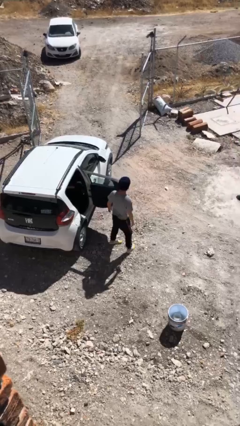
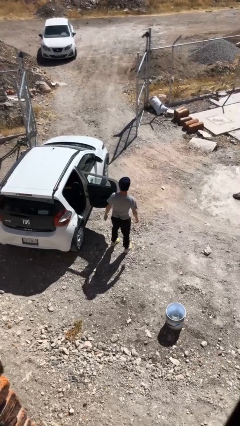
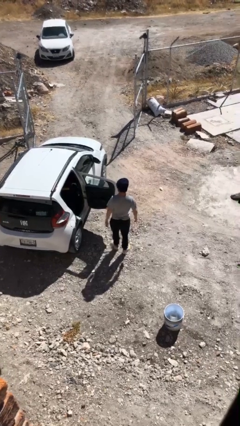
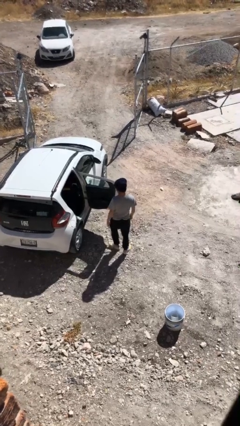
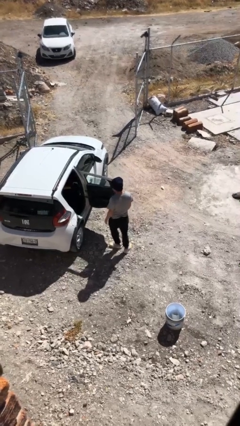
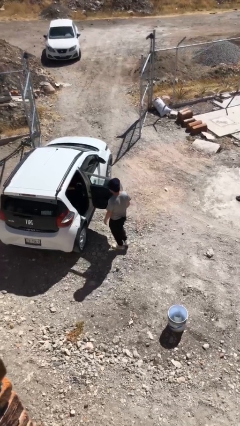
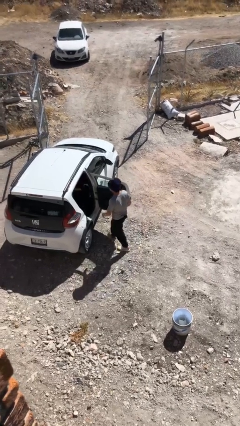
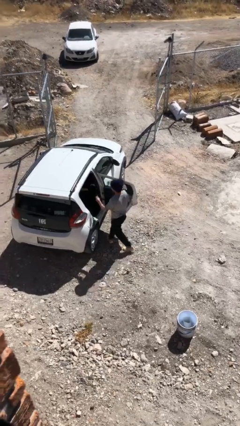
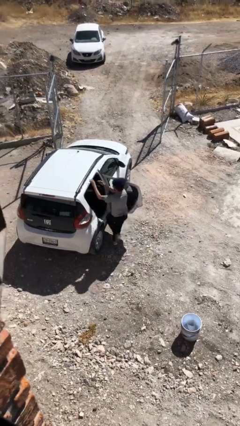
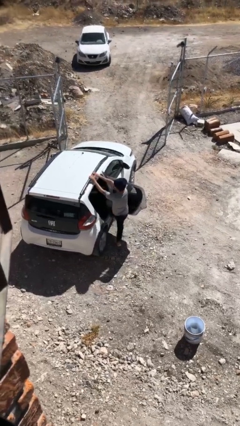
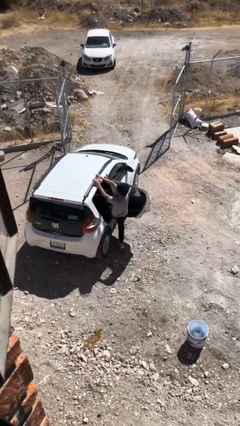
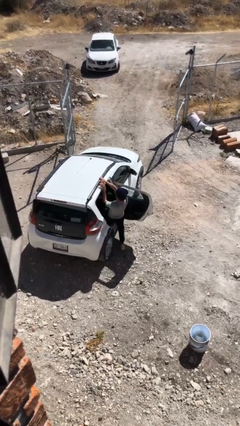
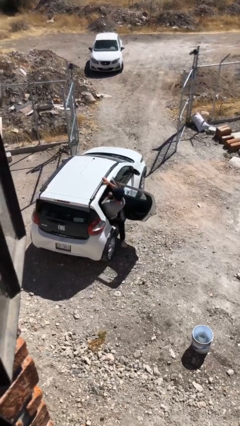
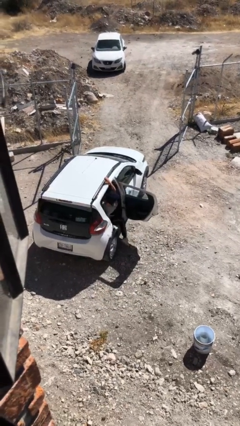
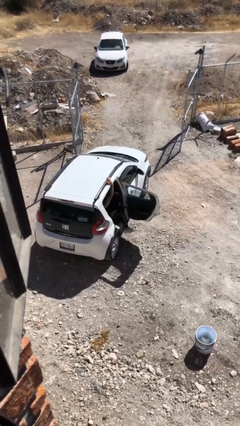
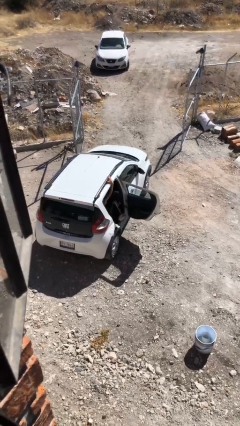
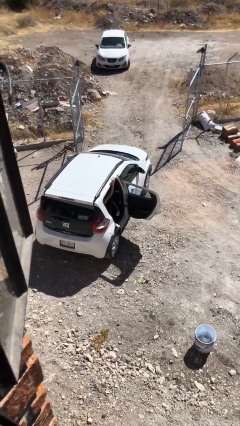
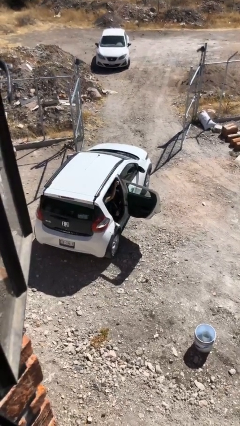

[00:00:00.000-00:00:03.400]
person enters car

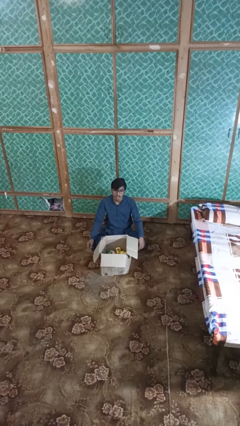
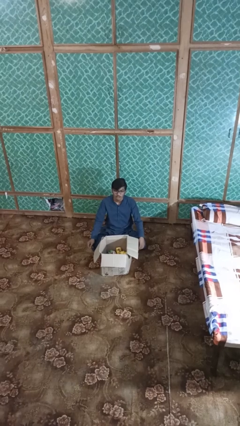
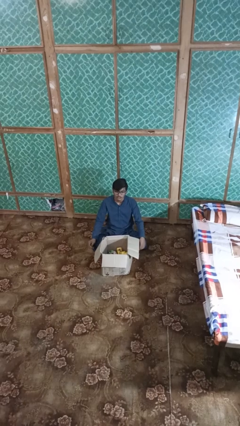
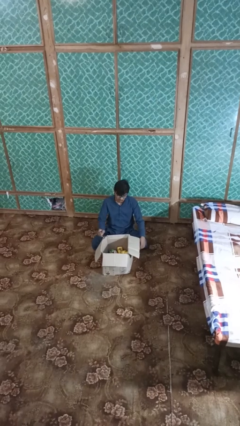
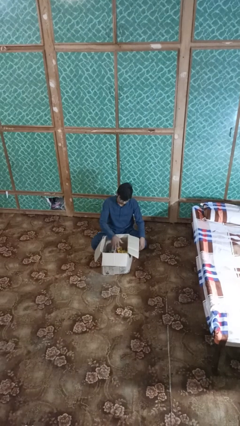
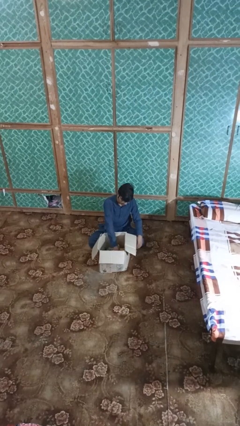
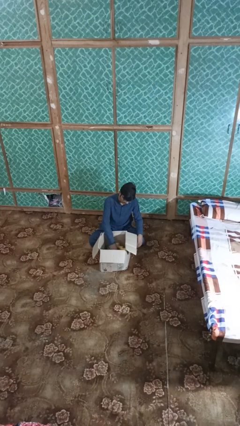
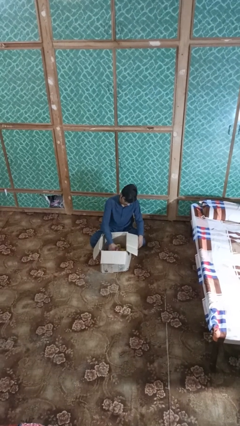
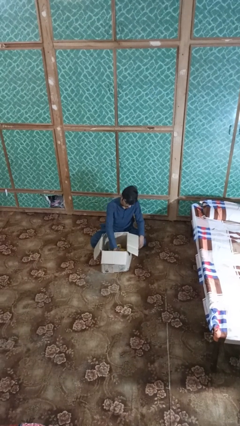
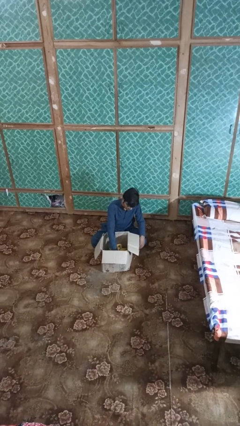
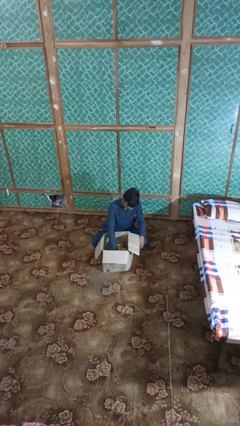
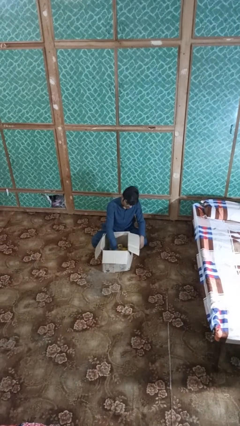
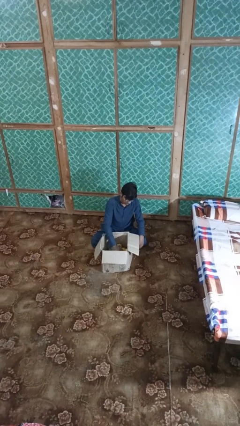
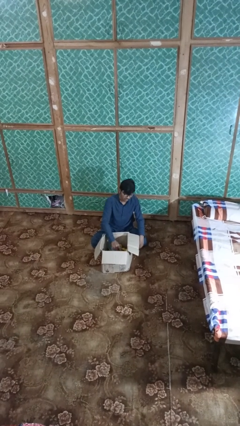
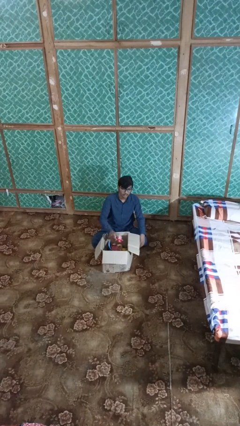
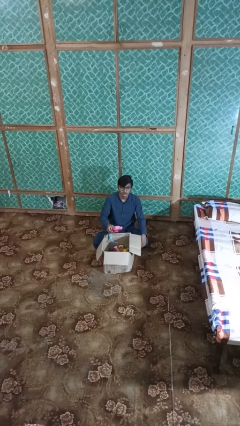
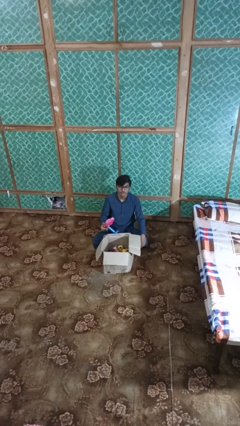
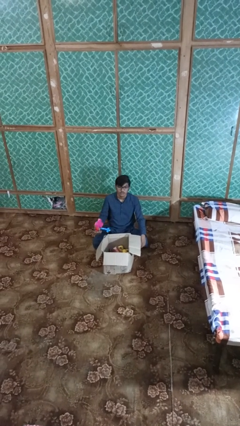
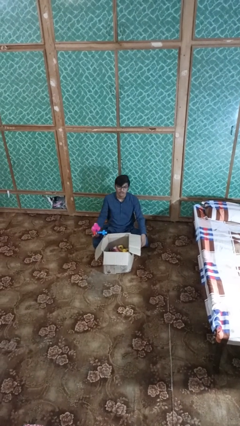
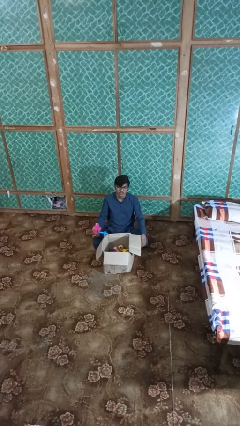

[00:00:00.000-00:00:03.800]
person takes object from box

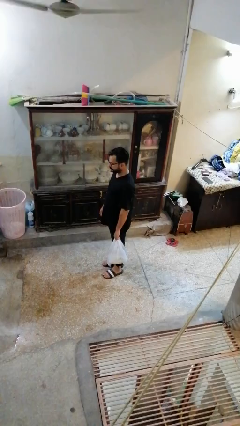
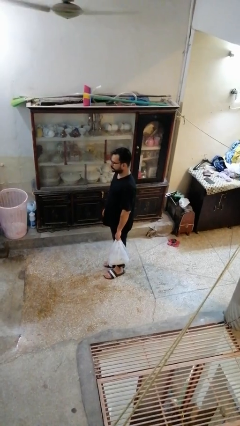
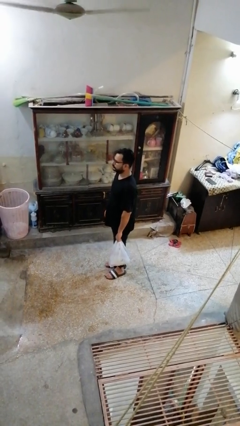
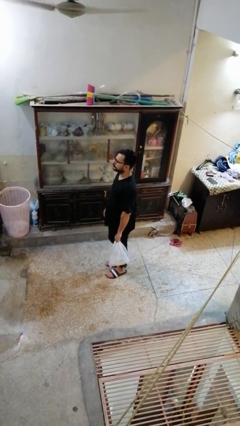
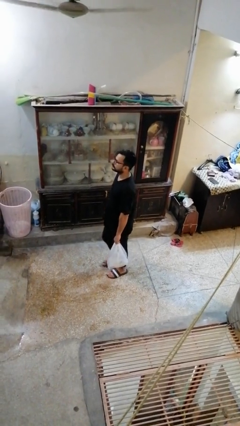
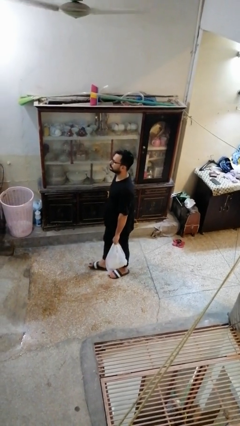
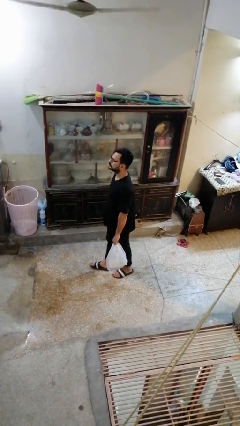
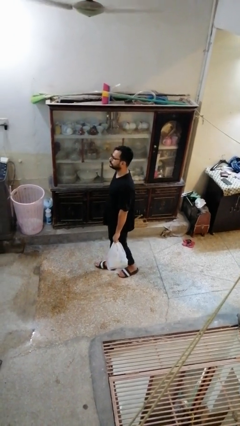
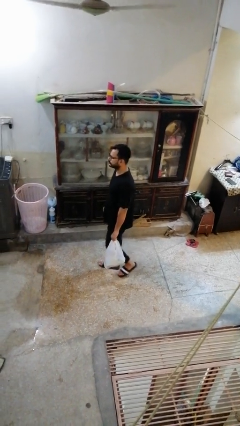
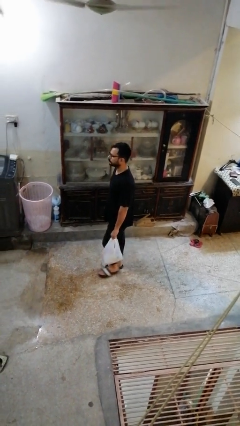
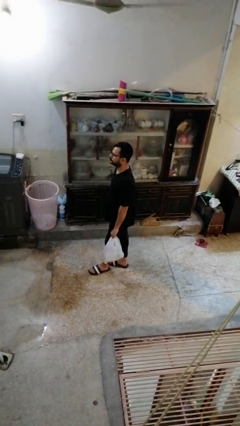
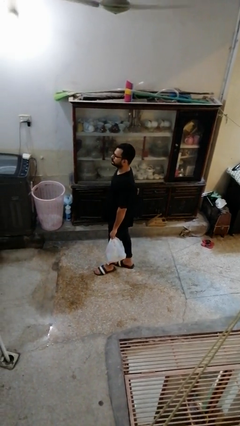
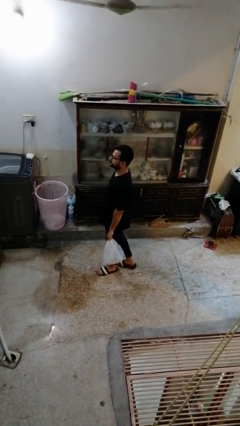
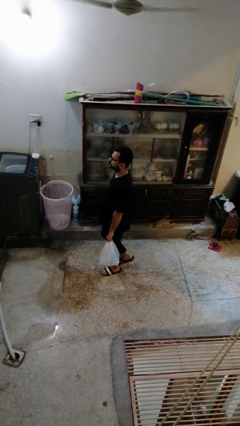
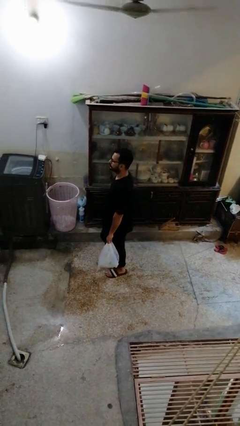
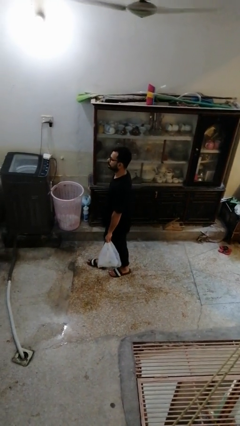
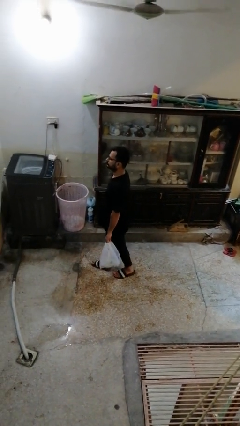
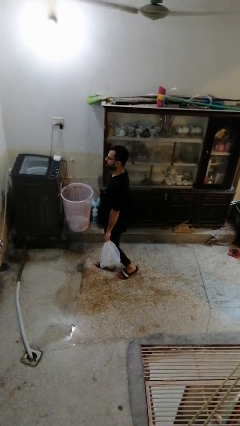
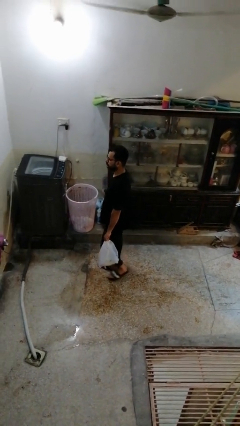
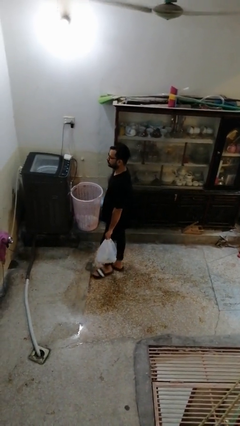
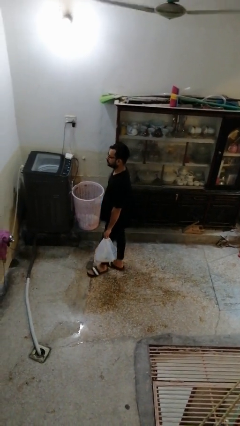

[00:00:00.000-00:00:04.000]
person carries groceries

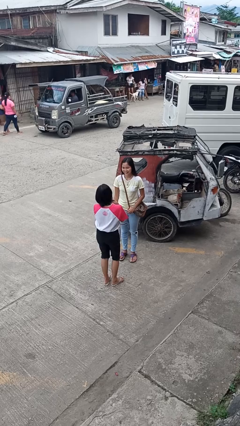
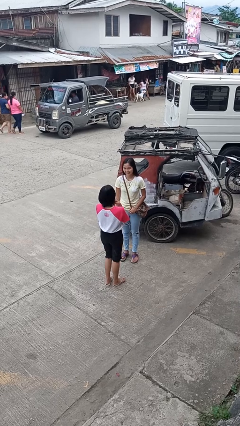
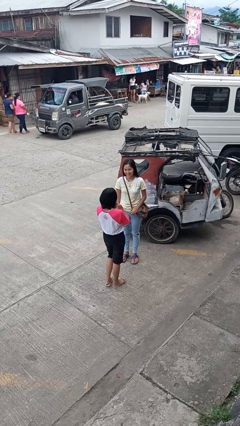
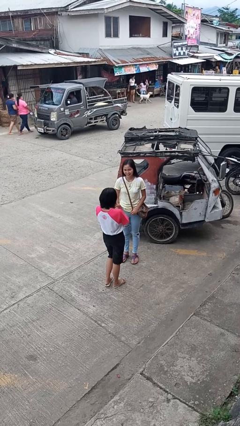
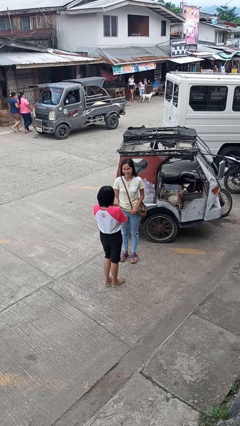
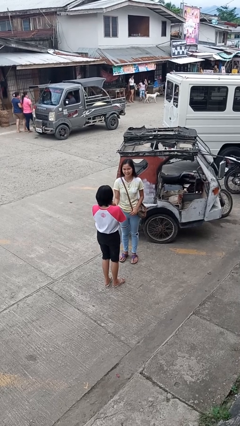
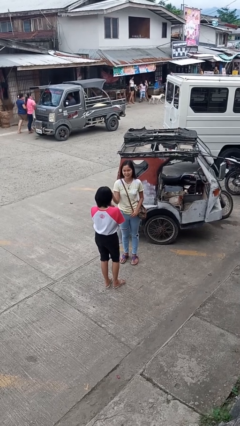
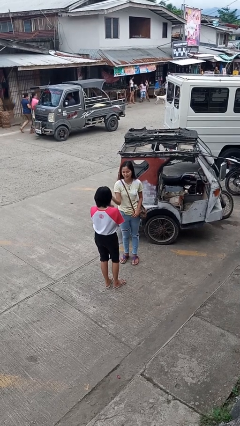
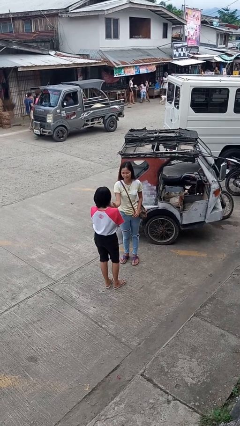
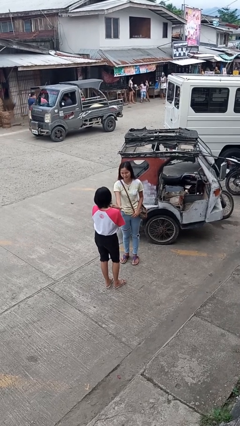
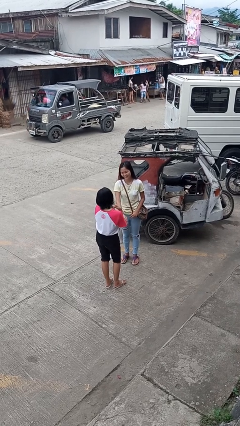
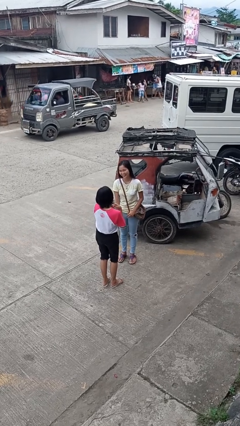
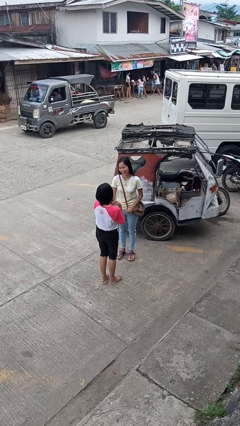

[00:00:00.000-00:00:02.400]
person laughs with person

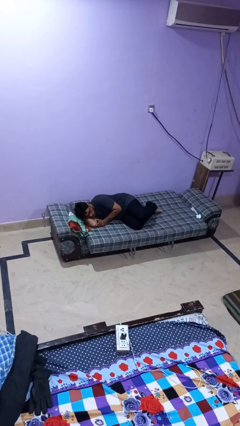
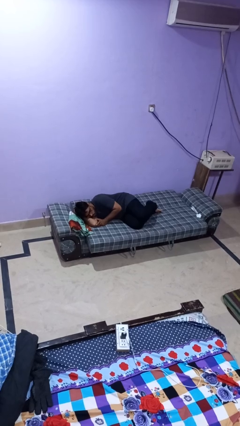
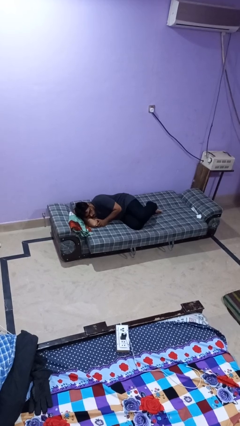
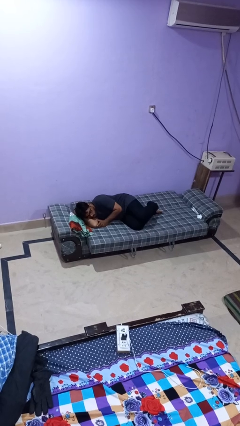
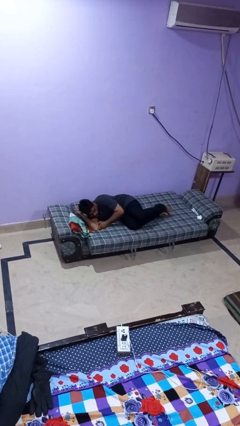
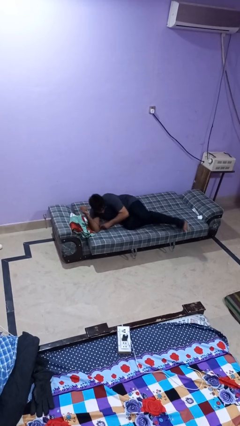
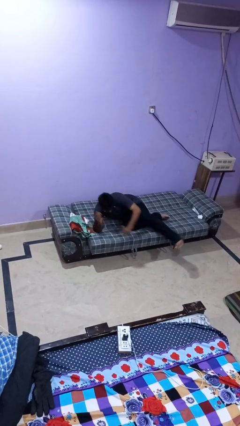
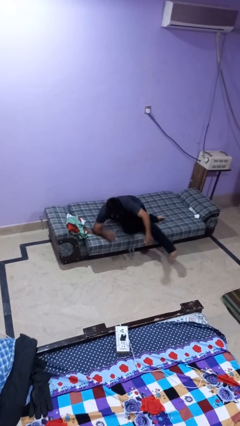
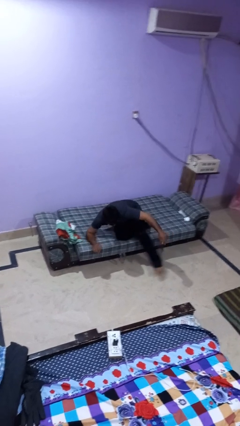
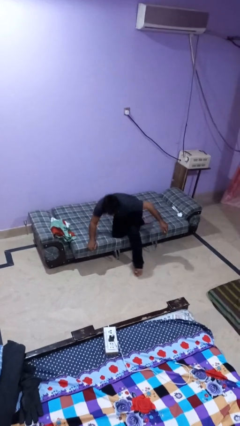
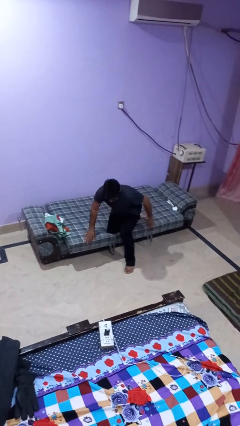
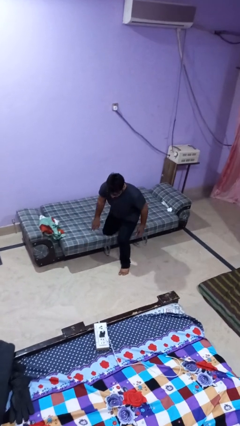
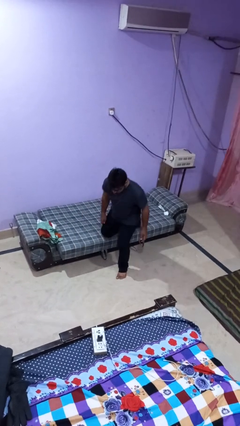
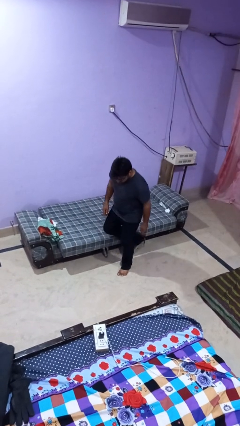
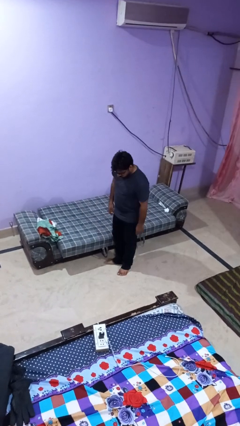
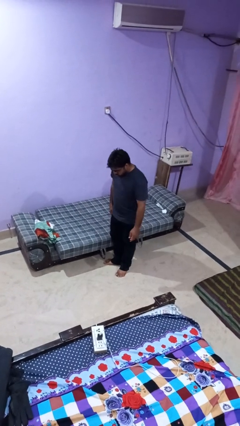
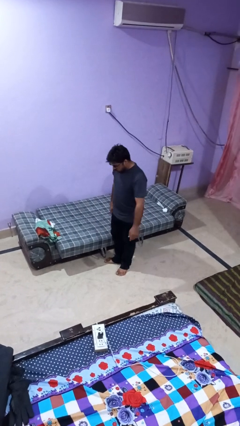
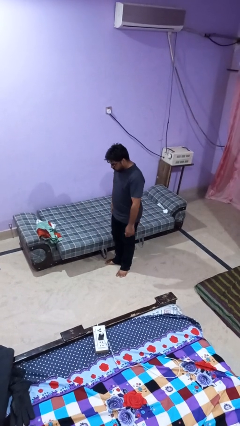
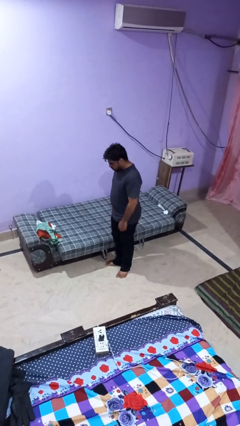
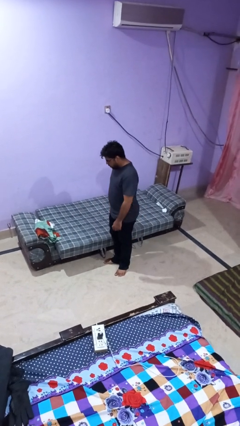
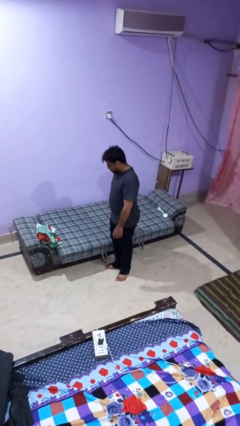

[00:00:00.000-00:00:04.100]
person stands up
